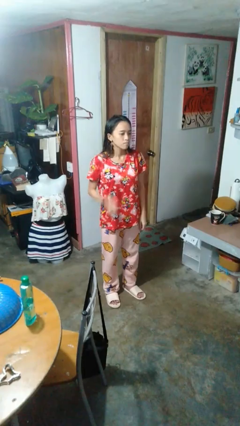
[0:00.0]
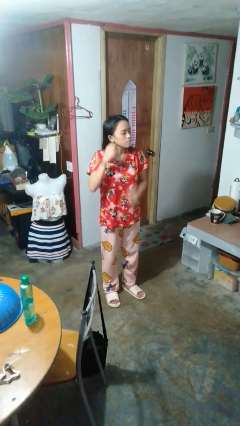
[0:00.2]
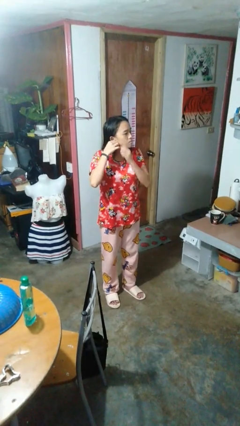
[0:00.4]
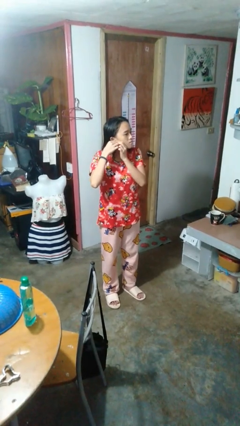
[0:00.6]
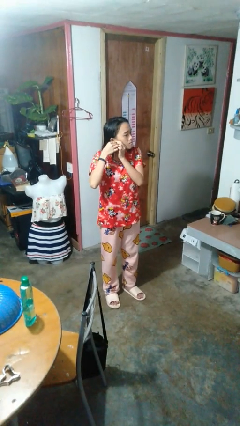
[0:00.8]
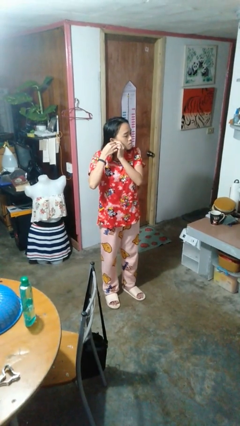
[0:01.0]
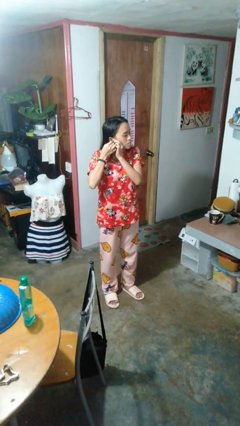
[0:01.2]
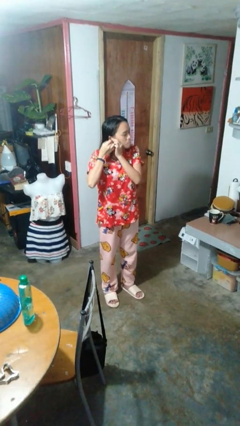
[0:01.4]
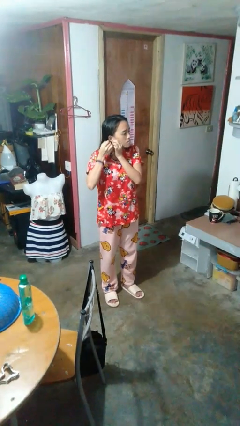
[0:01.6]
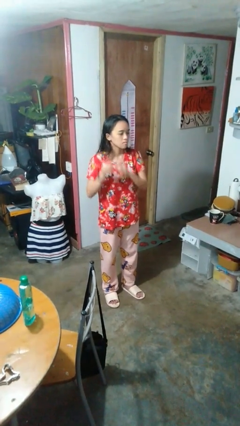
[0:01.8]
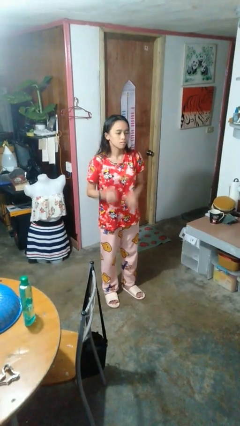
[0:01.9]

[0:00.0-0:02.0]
person takes off earrings

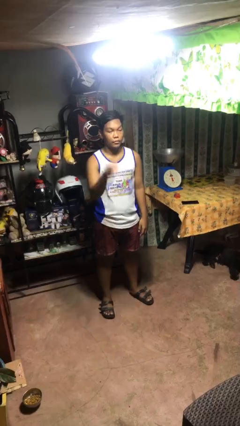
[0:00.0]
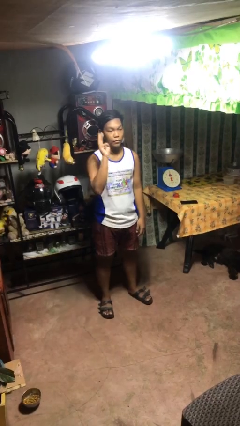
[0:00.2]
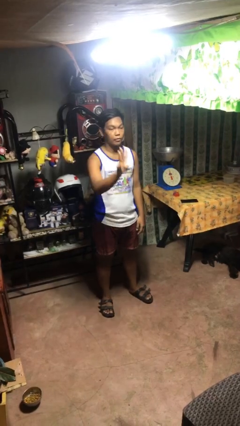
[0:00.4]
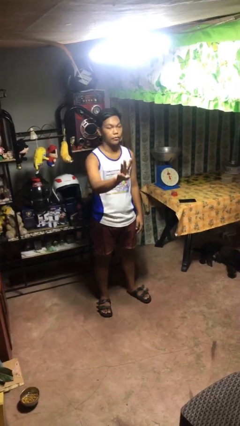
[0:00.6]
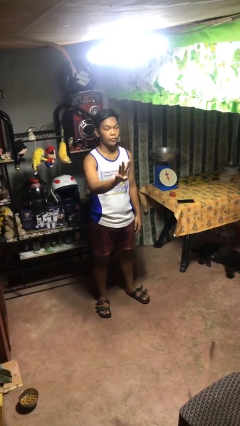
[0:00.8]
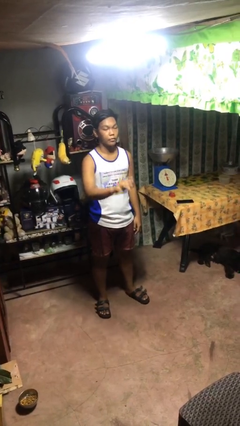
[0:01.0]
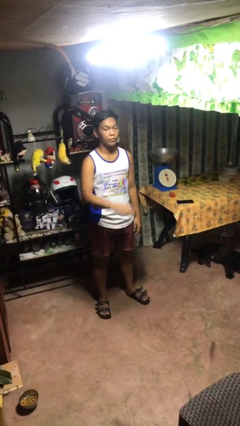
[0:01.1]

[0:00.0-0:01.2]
person gestures number three

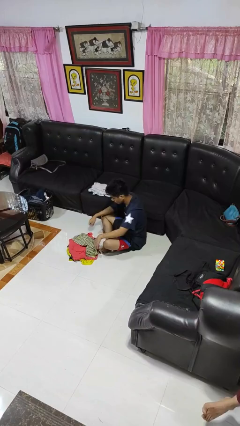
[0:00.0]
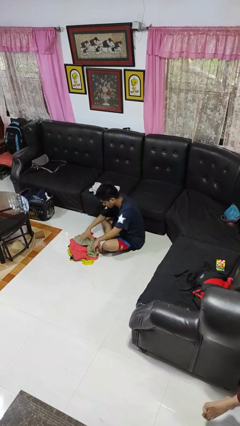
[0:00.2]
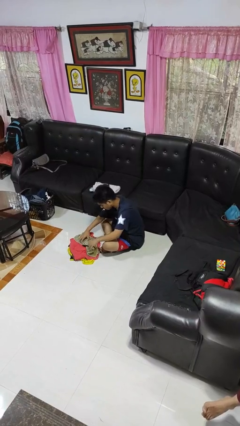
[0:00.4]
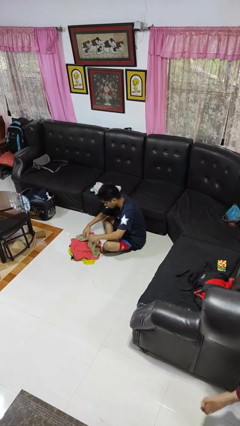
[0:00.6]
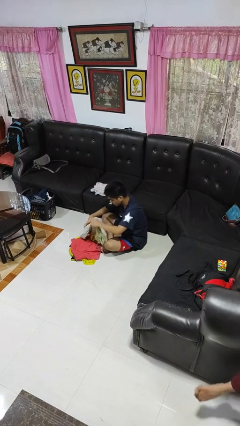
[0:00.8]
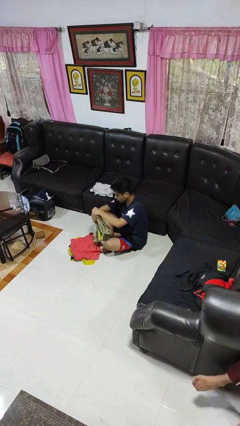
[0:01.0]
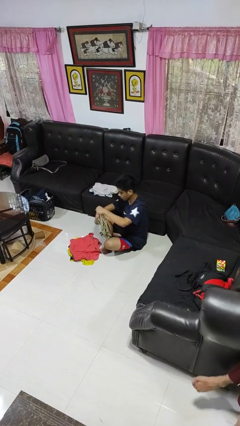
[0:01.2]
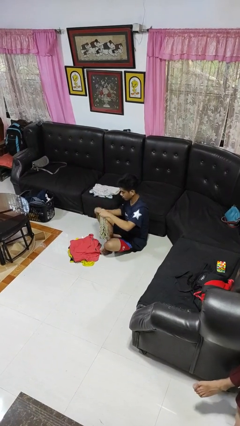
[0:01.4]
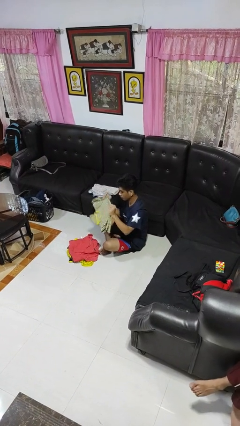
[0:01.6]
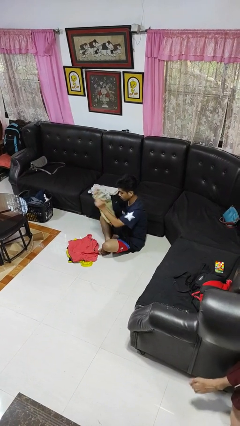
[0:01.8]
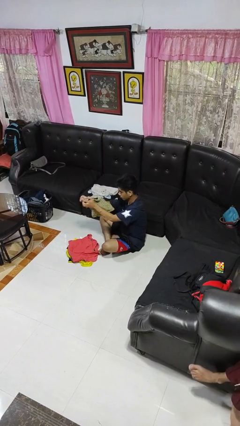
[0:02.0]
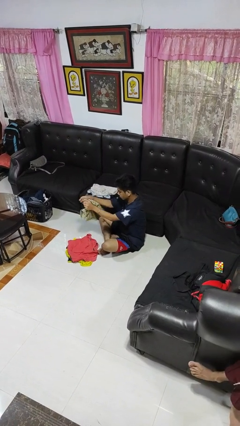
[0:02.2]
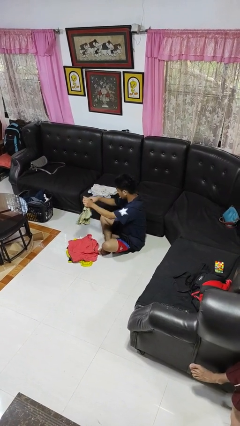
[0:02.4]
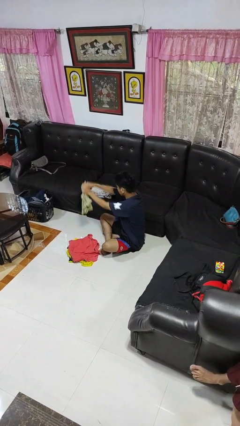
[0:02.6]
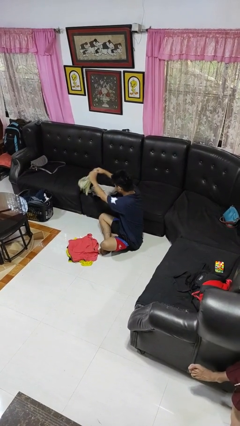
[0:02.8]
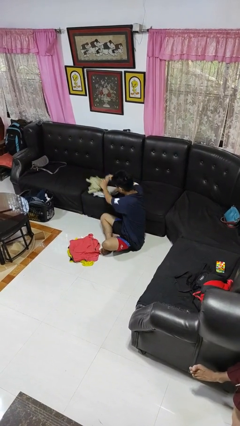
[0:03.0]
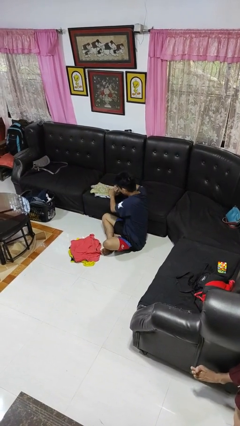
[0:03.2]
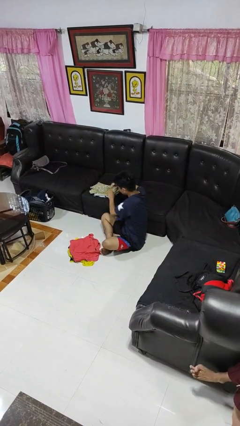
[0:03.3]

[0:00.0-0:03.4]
person folds shirt

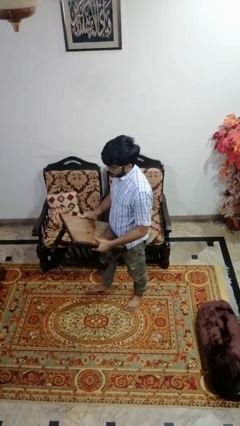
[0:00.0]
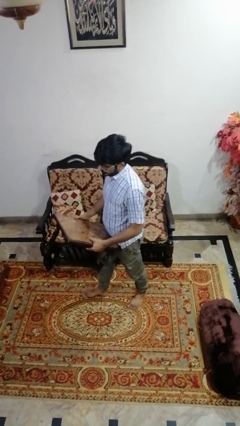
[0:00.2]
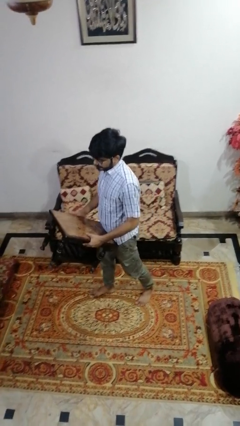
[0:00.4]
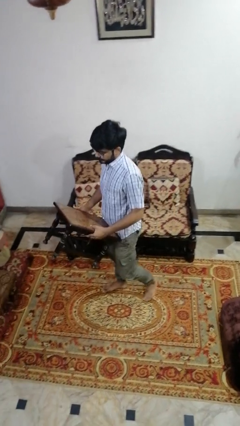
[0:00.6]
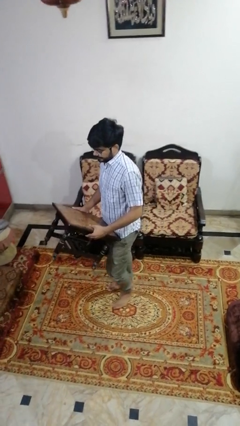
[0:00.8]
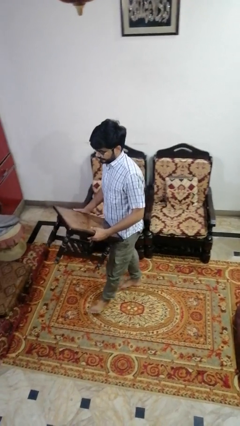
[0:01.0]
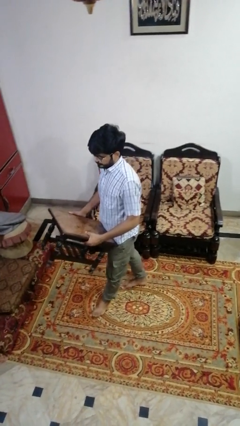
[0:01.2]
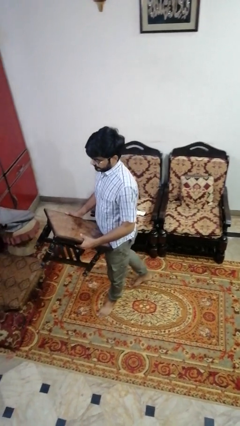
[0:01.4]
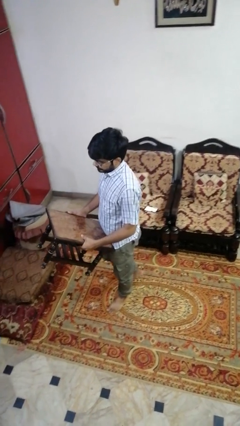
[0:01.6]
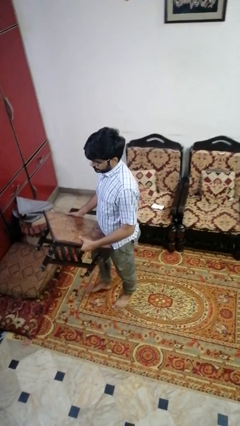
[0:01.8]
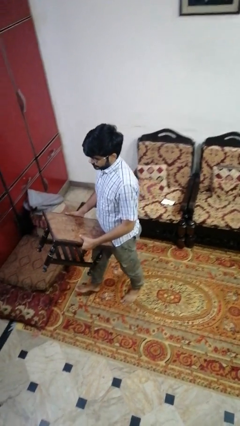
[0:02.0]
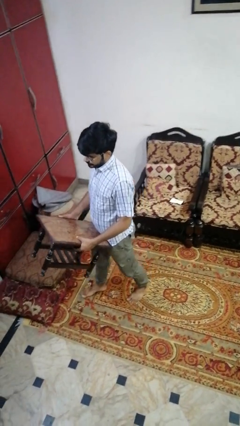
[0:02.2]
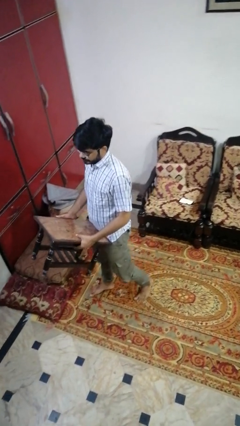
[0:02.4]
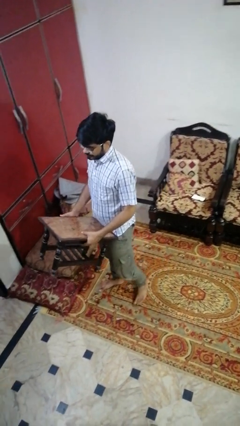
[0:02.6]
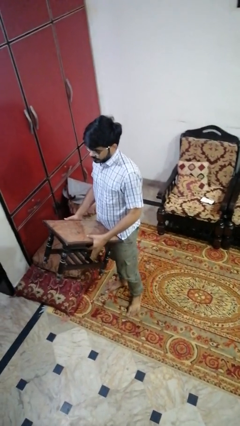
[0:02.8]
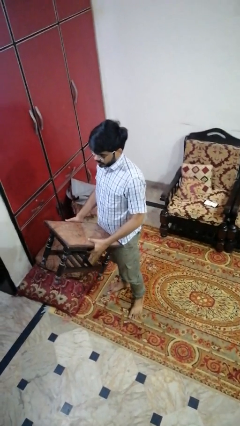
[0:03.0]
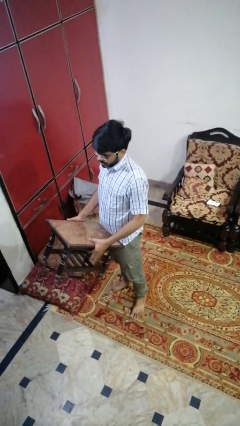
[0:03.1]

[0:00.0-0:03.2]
person carries furniture

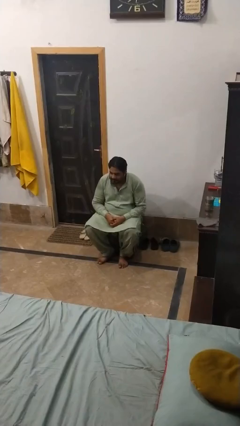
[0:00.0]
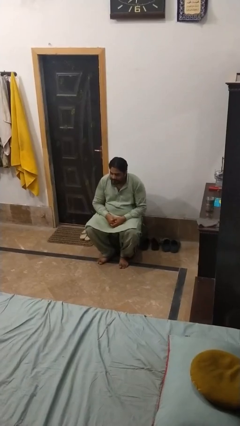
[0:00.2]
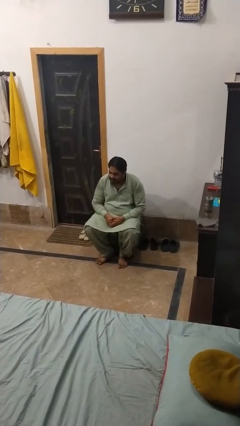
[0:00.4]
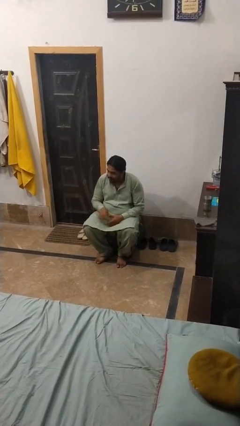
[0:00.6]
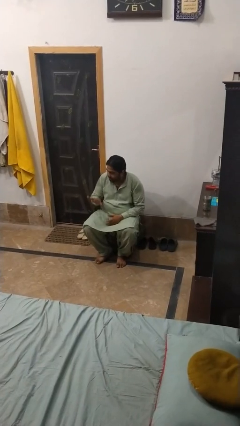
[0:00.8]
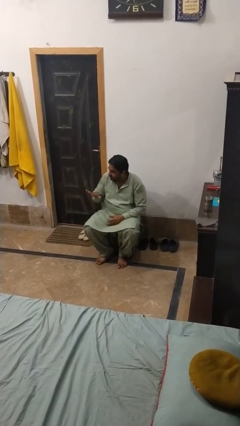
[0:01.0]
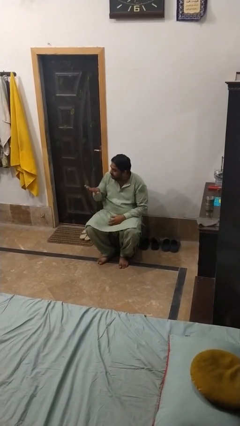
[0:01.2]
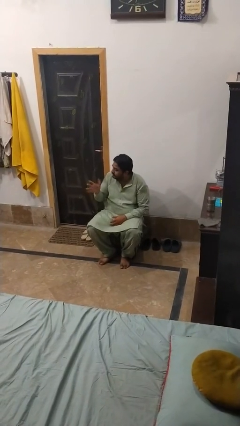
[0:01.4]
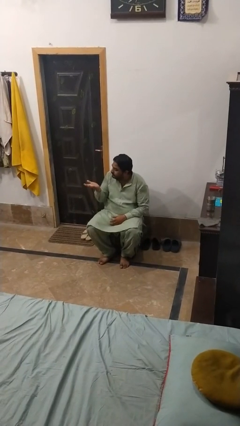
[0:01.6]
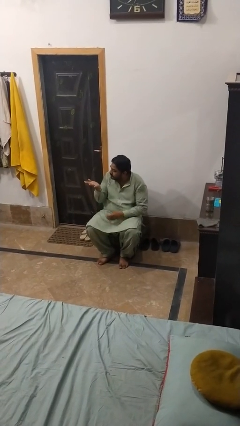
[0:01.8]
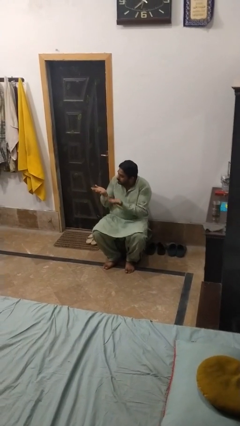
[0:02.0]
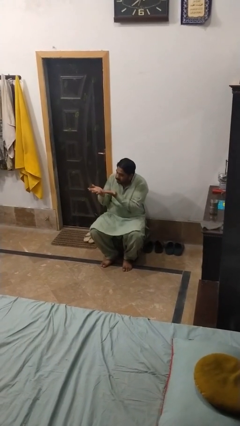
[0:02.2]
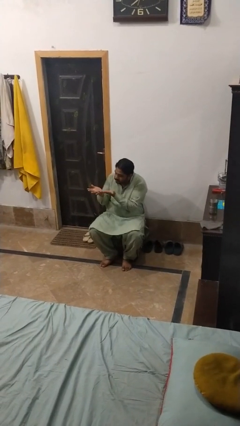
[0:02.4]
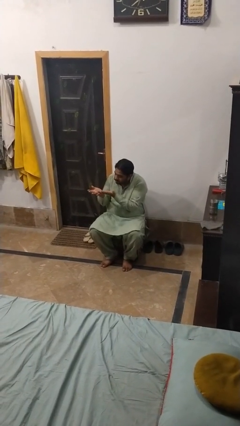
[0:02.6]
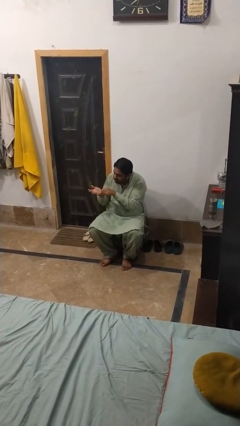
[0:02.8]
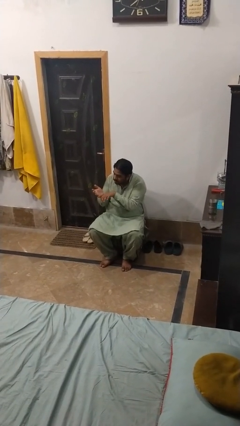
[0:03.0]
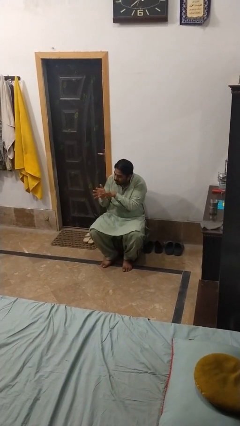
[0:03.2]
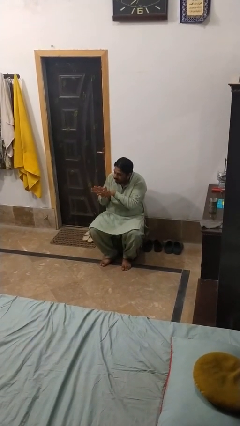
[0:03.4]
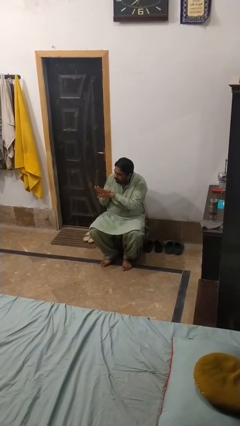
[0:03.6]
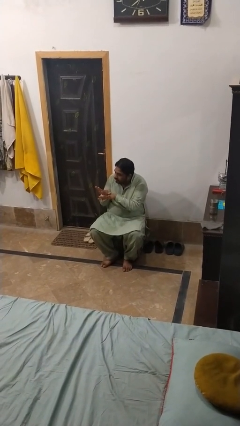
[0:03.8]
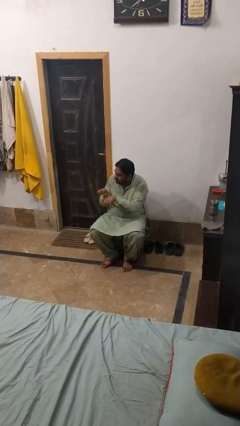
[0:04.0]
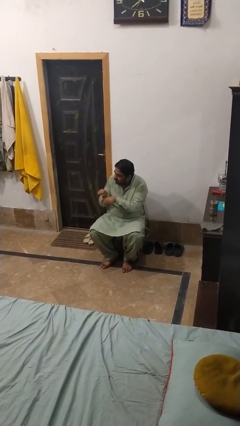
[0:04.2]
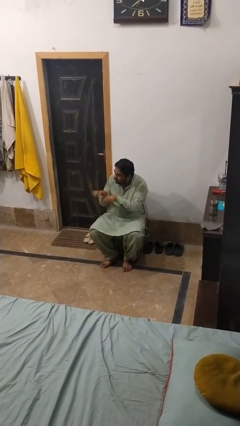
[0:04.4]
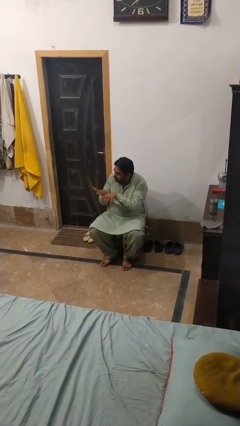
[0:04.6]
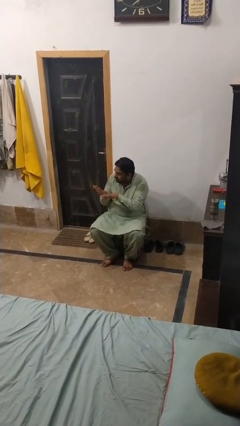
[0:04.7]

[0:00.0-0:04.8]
person looks at hands in lap

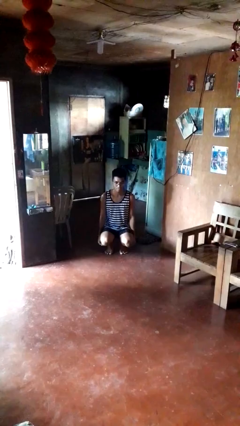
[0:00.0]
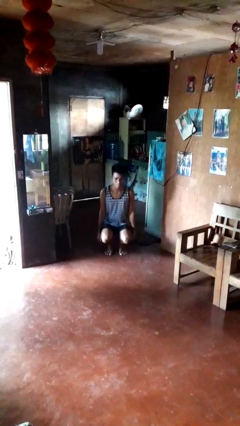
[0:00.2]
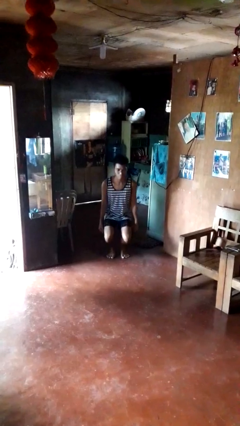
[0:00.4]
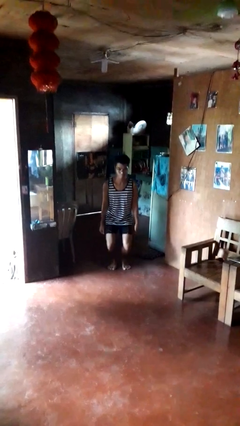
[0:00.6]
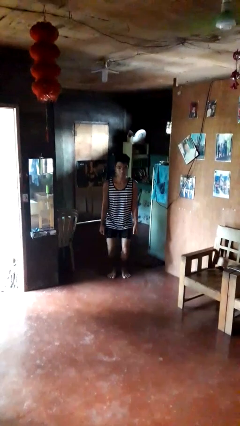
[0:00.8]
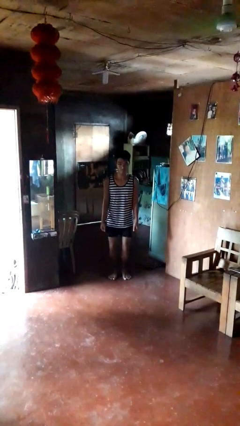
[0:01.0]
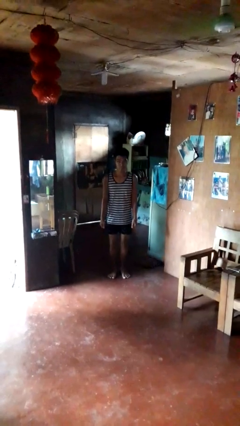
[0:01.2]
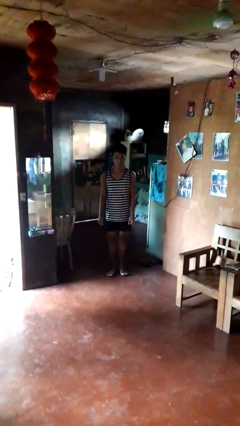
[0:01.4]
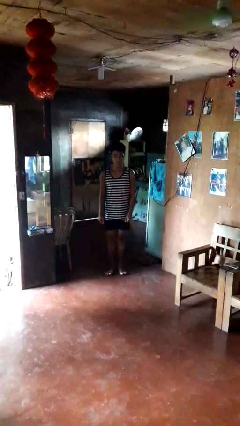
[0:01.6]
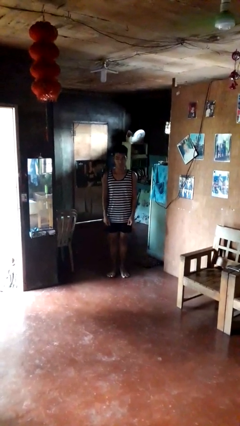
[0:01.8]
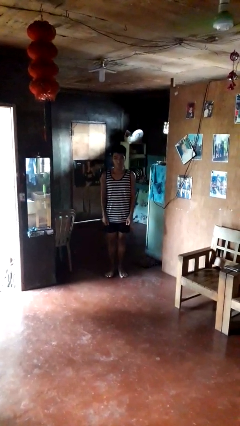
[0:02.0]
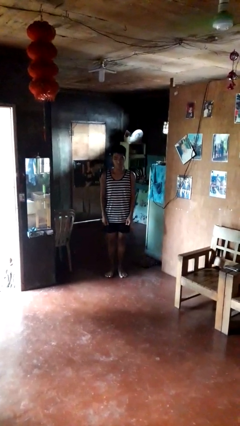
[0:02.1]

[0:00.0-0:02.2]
person stands up

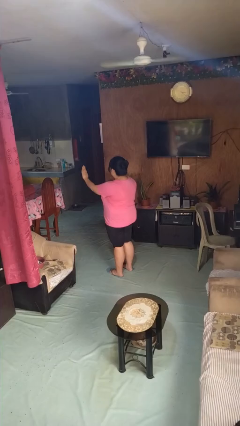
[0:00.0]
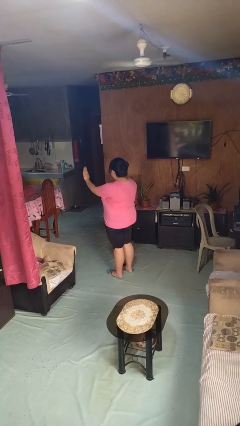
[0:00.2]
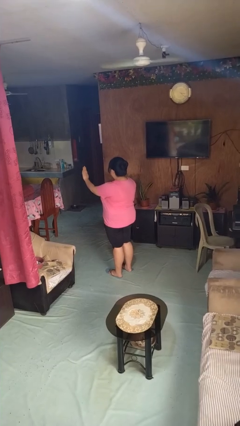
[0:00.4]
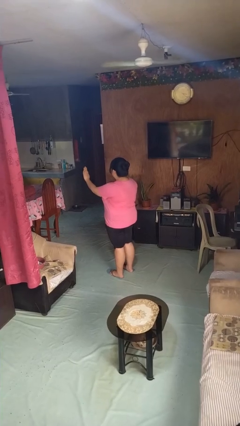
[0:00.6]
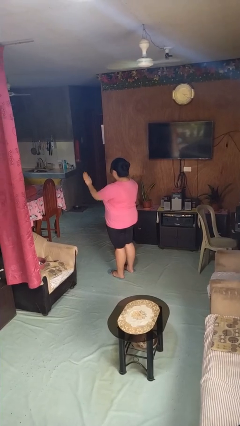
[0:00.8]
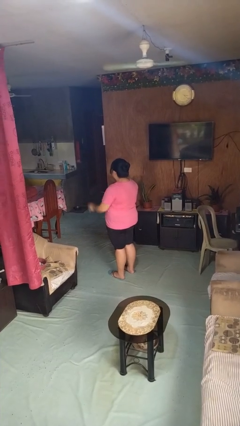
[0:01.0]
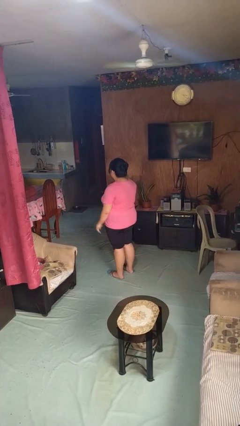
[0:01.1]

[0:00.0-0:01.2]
person gestures stop
